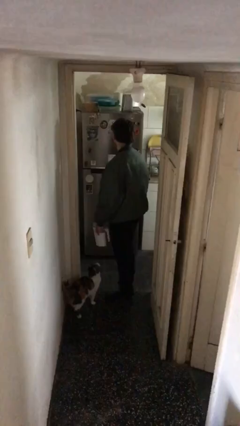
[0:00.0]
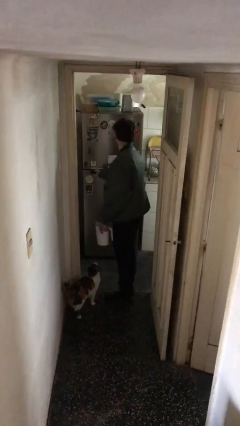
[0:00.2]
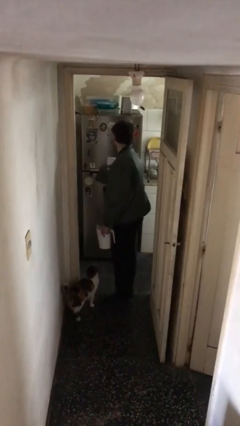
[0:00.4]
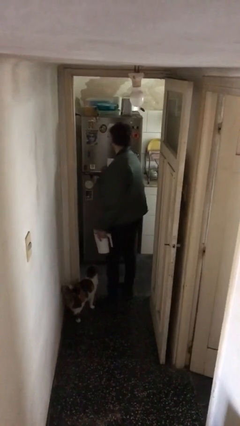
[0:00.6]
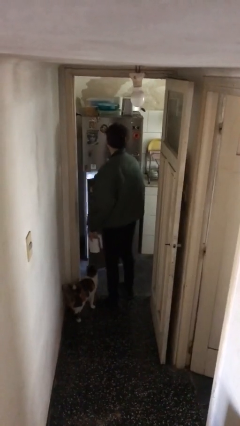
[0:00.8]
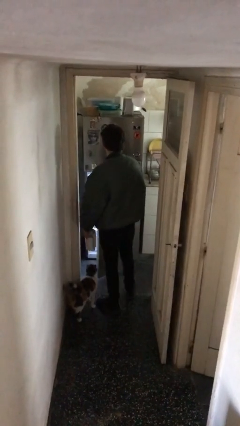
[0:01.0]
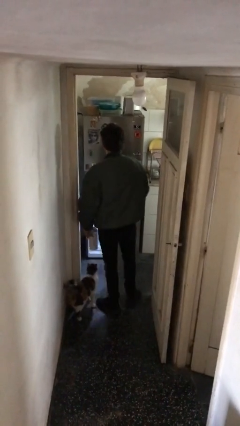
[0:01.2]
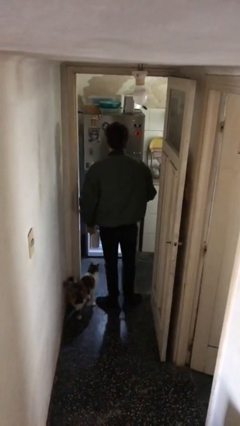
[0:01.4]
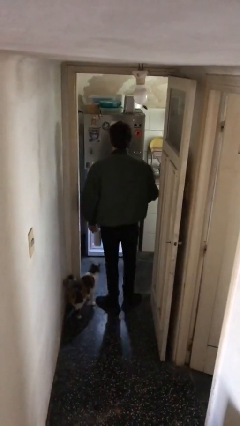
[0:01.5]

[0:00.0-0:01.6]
person opens refrigerator

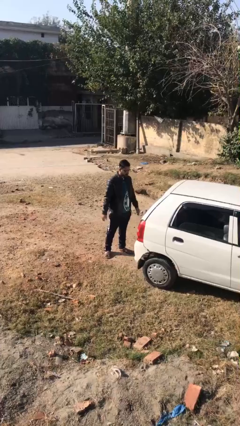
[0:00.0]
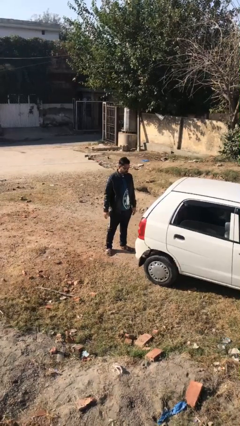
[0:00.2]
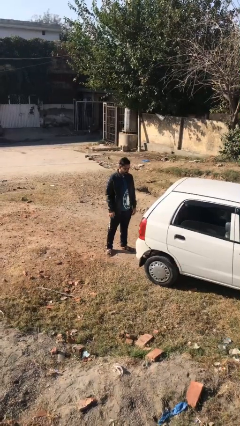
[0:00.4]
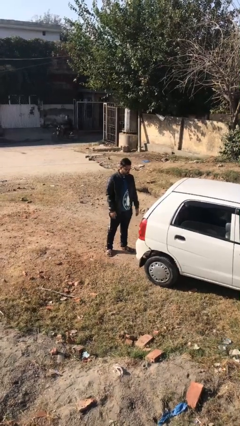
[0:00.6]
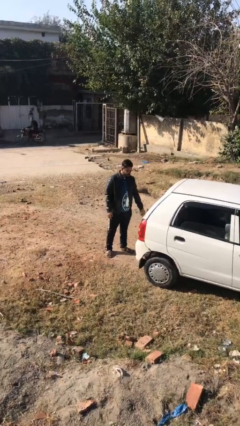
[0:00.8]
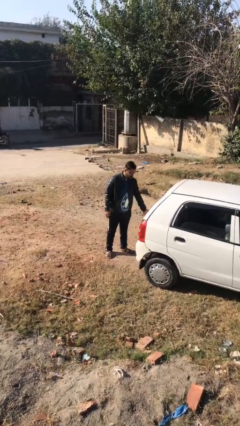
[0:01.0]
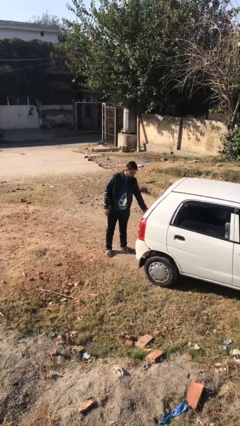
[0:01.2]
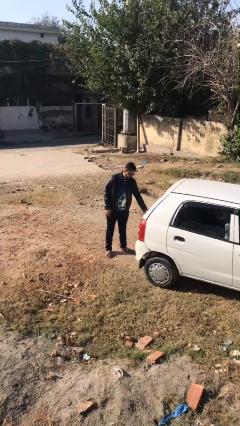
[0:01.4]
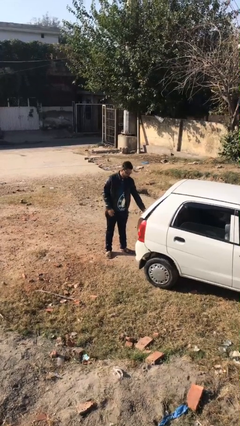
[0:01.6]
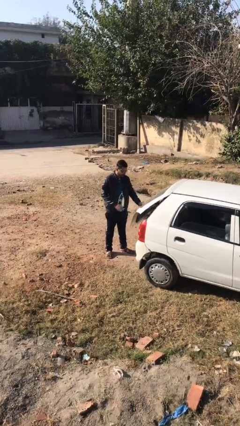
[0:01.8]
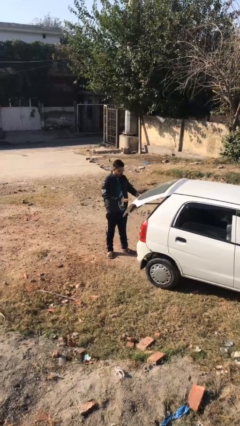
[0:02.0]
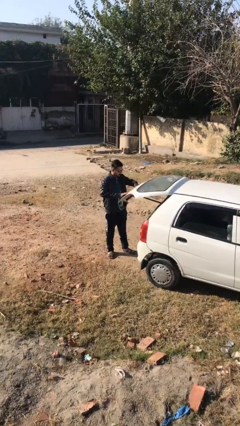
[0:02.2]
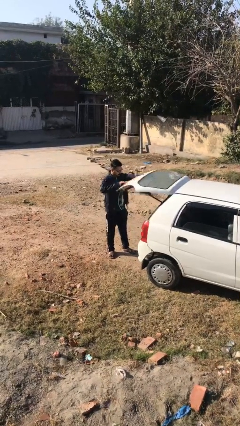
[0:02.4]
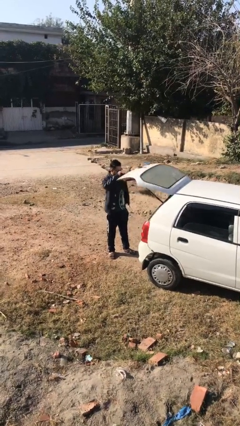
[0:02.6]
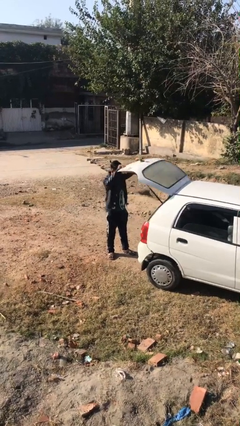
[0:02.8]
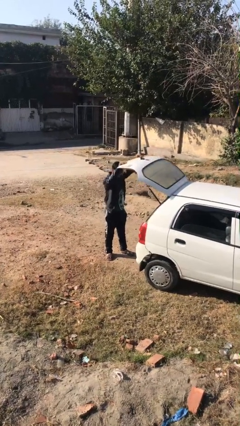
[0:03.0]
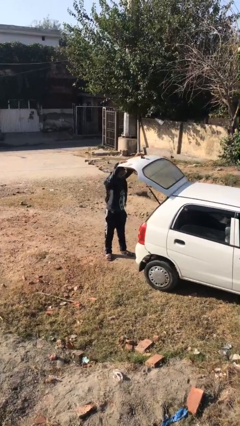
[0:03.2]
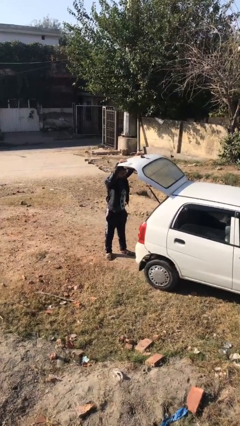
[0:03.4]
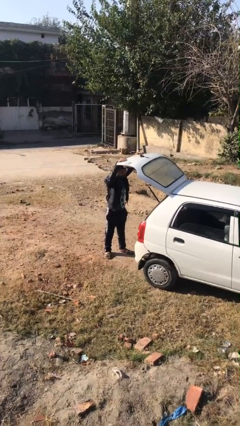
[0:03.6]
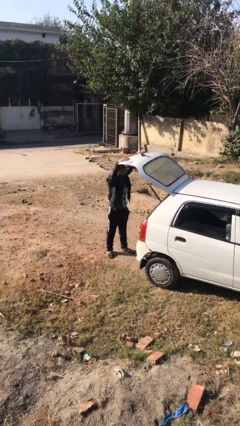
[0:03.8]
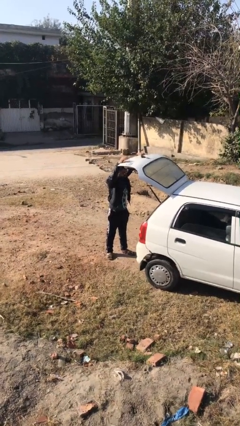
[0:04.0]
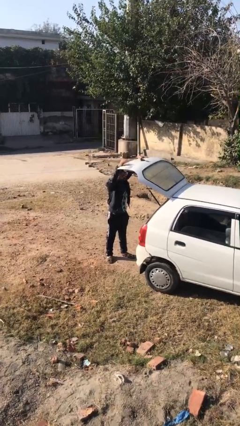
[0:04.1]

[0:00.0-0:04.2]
person opens car trunk

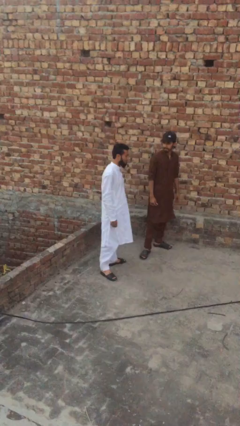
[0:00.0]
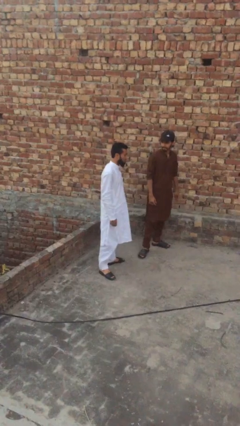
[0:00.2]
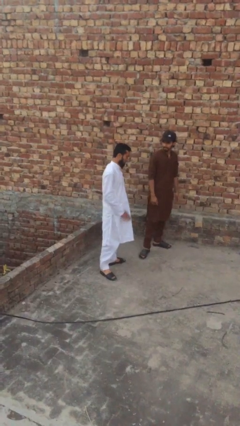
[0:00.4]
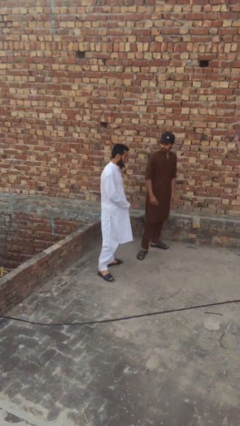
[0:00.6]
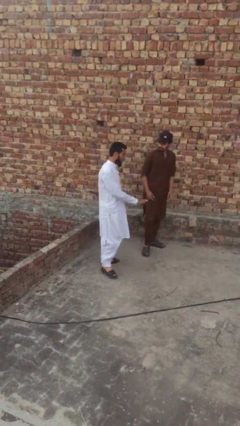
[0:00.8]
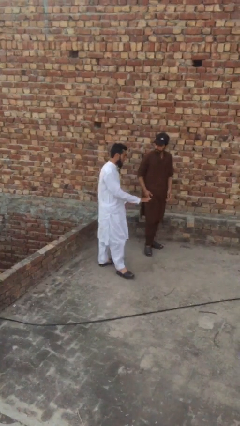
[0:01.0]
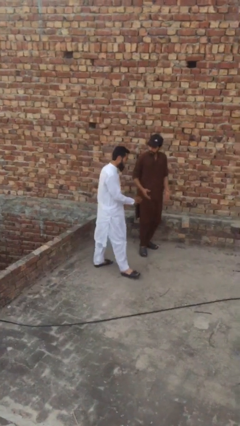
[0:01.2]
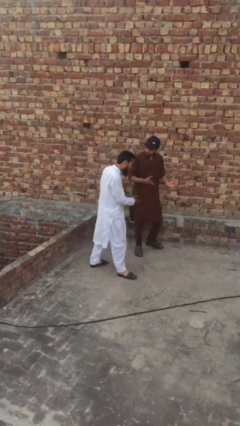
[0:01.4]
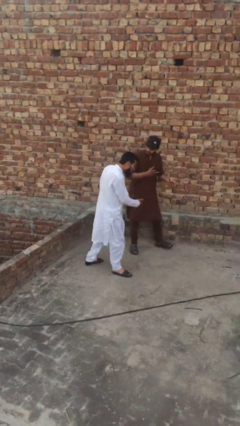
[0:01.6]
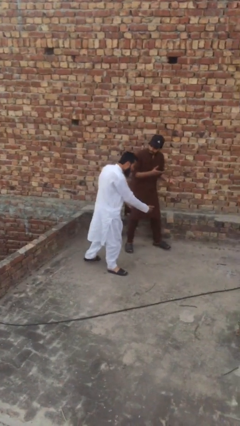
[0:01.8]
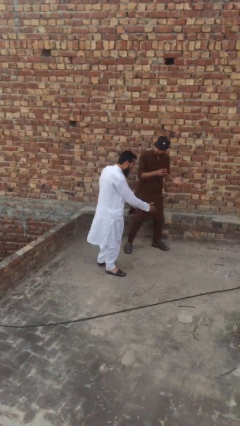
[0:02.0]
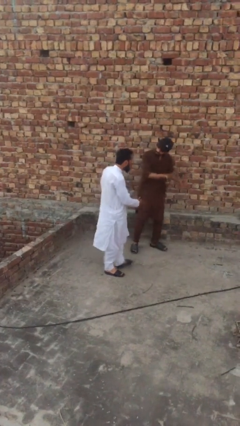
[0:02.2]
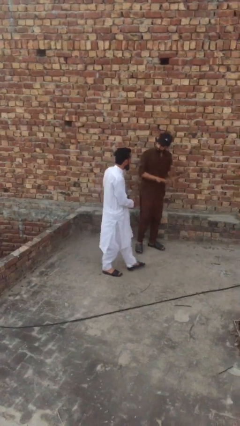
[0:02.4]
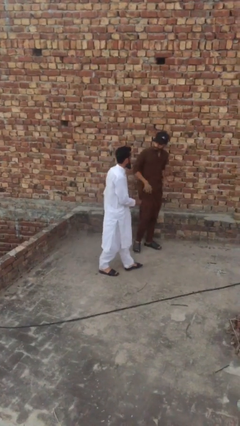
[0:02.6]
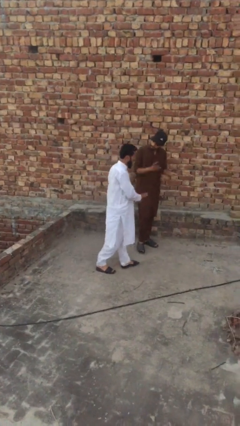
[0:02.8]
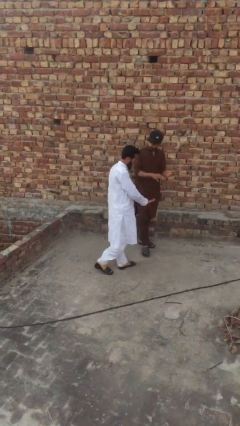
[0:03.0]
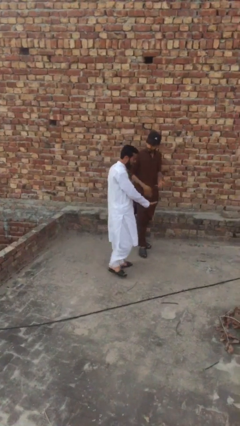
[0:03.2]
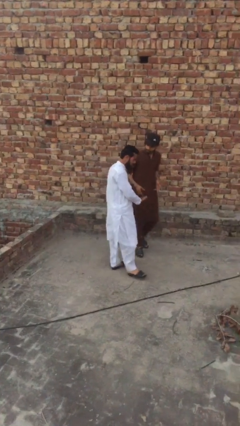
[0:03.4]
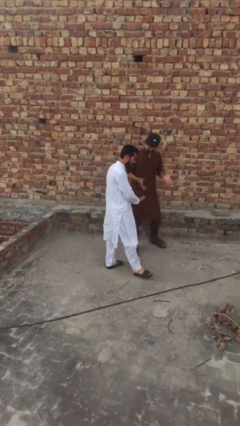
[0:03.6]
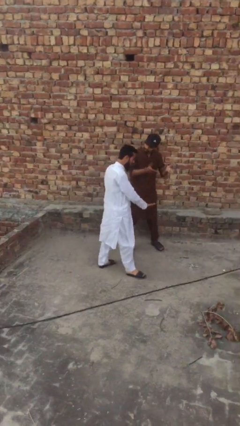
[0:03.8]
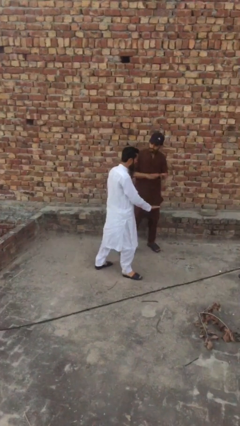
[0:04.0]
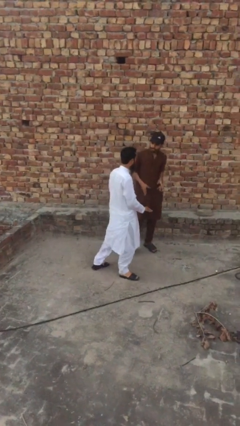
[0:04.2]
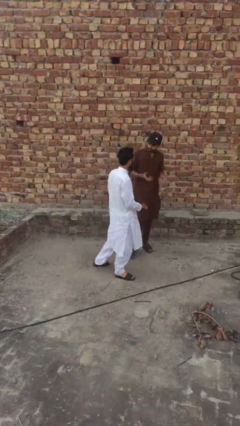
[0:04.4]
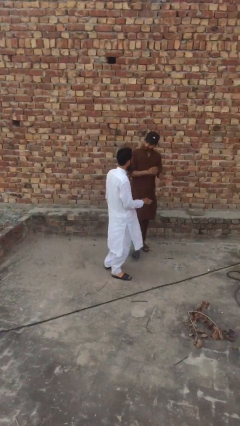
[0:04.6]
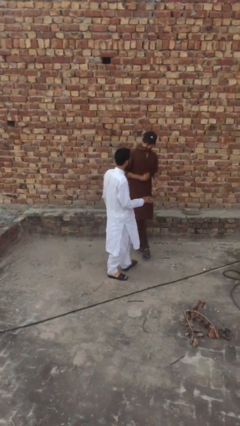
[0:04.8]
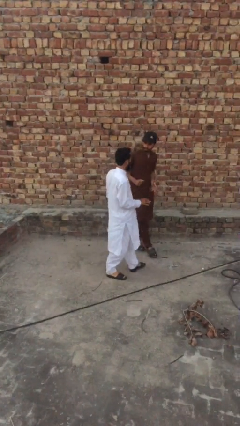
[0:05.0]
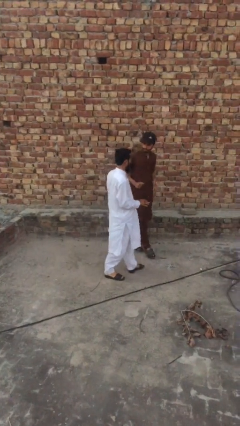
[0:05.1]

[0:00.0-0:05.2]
person talks to person

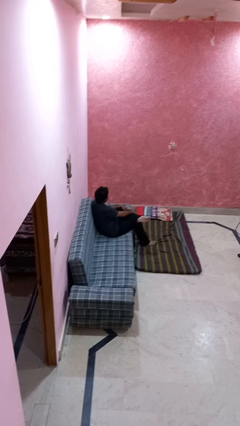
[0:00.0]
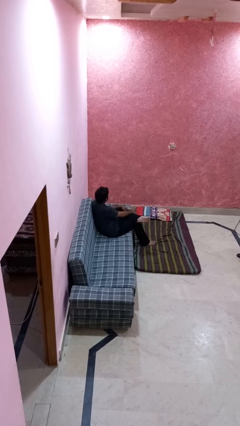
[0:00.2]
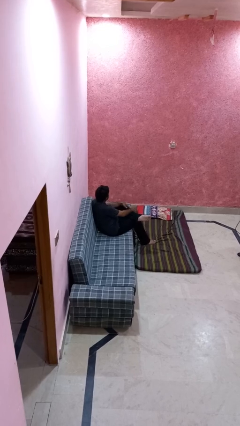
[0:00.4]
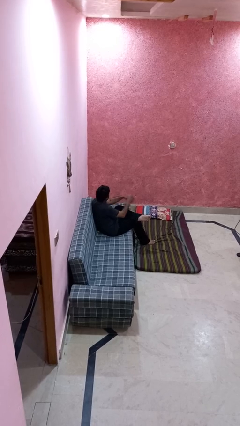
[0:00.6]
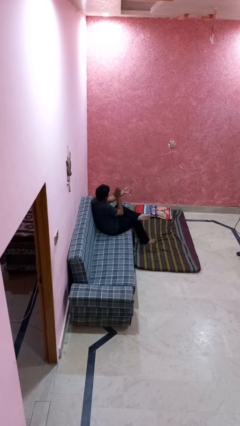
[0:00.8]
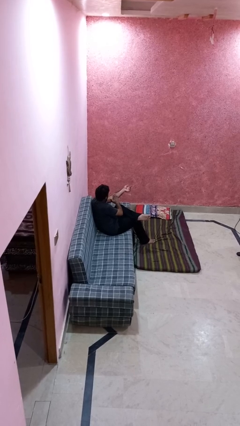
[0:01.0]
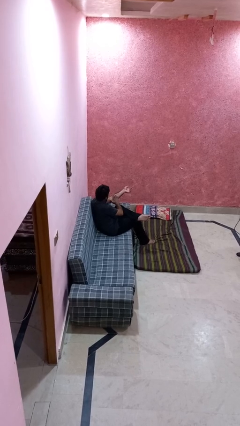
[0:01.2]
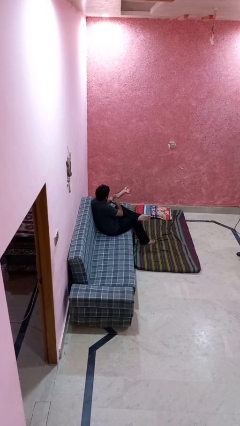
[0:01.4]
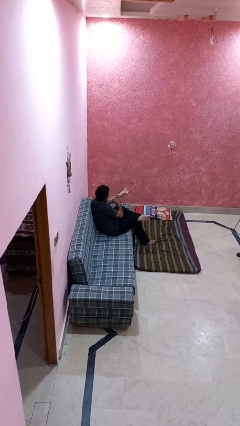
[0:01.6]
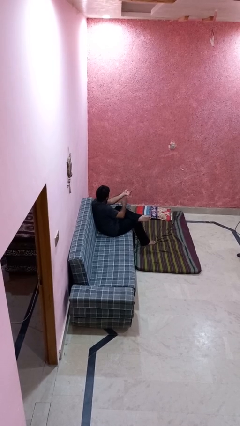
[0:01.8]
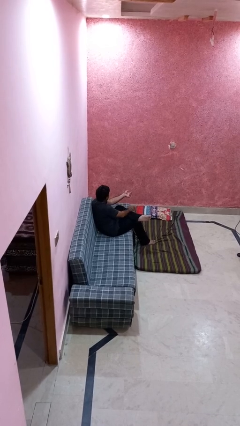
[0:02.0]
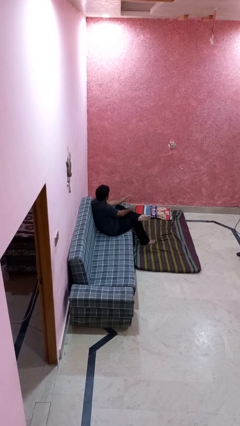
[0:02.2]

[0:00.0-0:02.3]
person swats bug

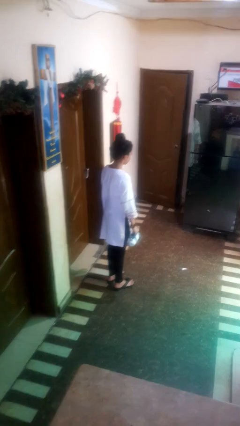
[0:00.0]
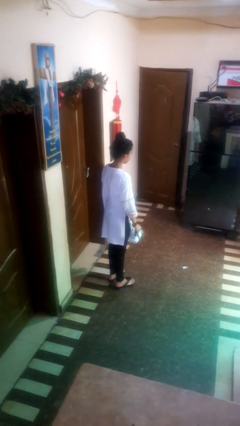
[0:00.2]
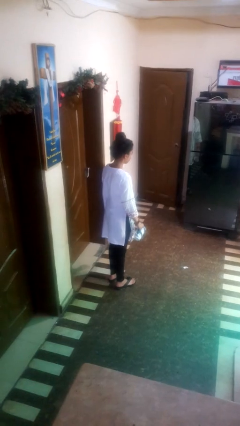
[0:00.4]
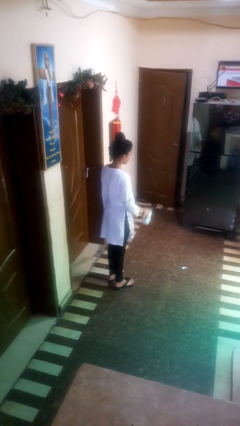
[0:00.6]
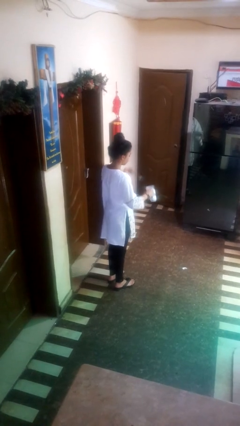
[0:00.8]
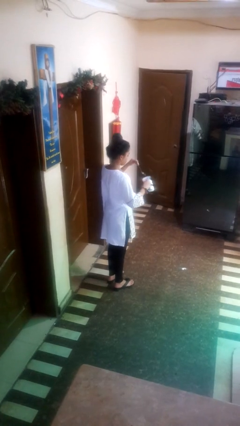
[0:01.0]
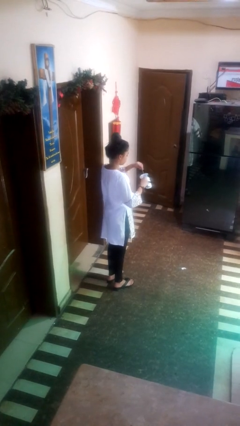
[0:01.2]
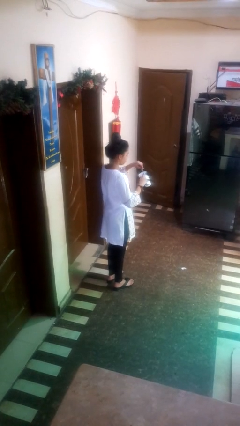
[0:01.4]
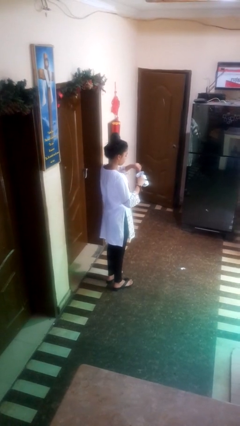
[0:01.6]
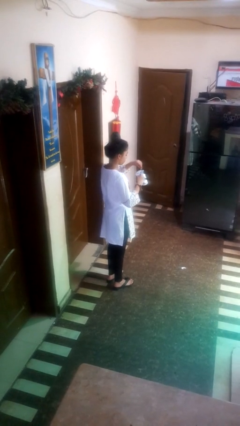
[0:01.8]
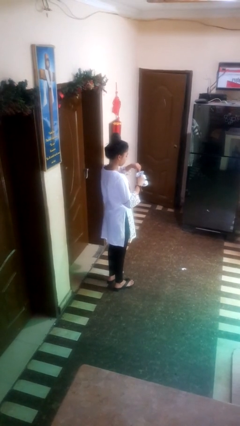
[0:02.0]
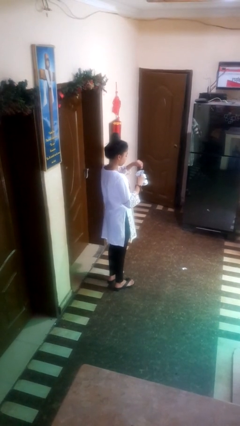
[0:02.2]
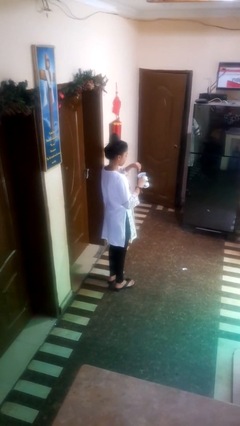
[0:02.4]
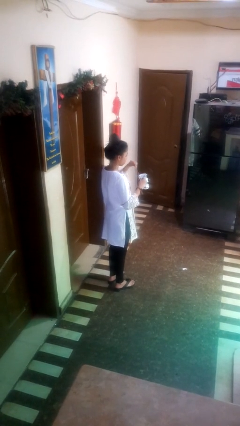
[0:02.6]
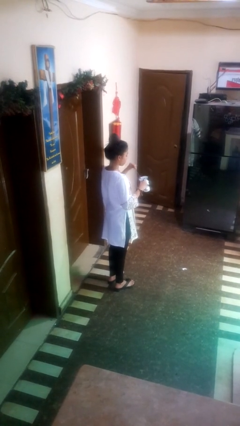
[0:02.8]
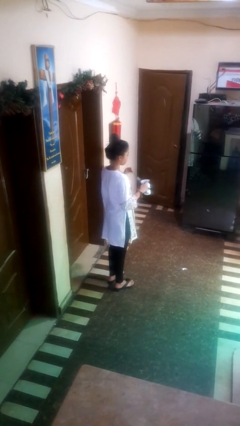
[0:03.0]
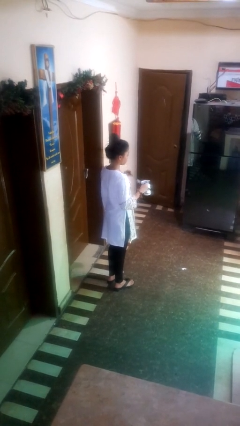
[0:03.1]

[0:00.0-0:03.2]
person stirs mug

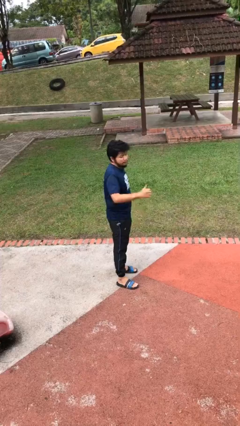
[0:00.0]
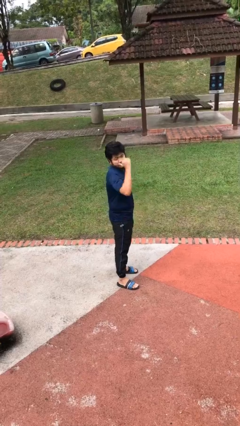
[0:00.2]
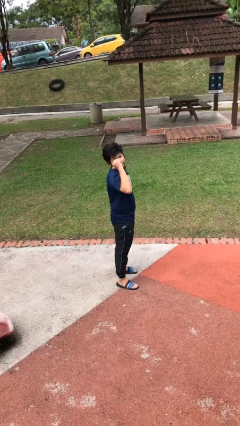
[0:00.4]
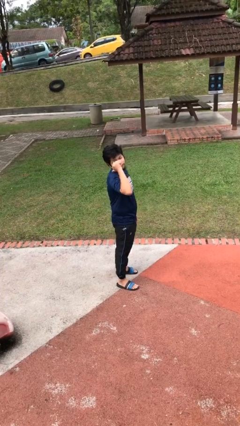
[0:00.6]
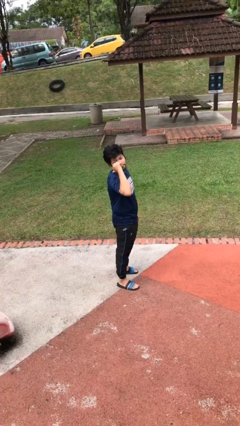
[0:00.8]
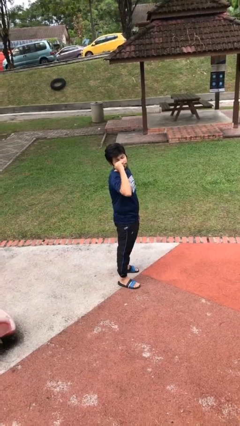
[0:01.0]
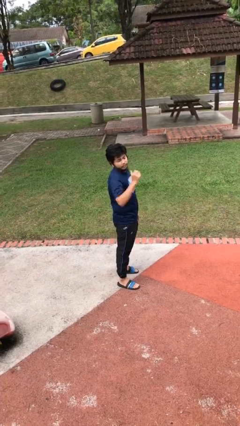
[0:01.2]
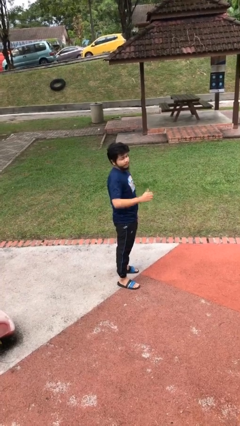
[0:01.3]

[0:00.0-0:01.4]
person gestures behind me
